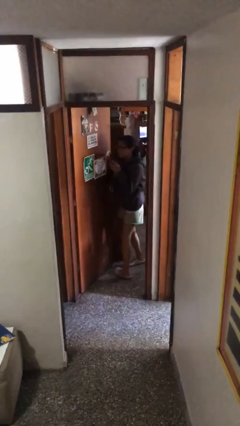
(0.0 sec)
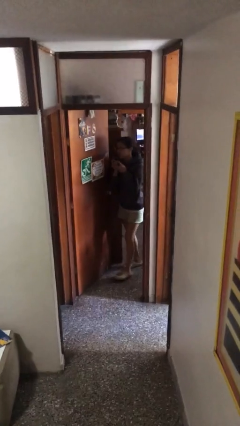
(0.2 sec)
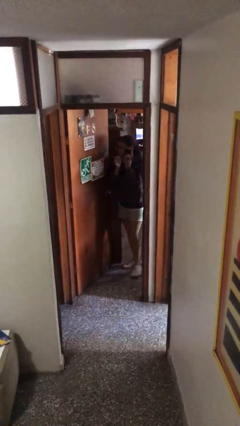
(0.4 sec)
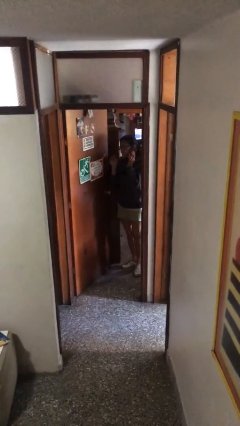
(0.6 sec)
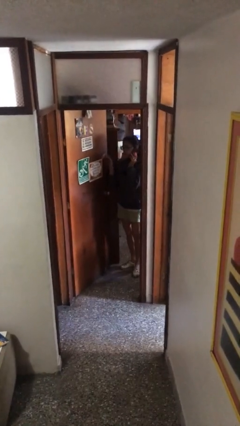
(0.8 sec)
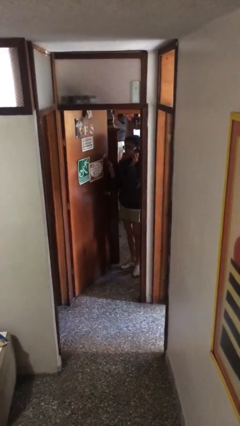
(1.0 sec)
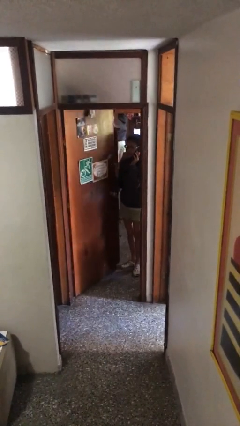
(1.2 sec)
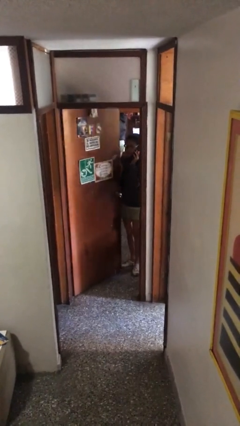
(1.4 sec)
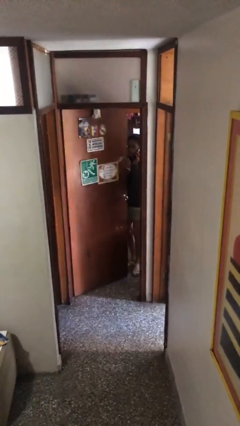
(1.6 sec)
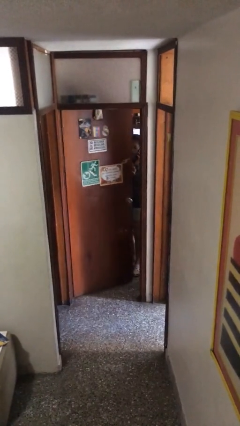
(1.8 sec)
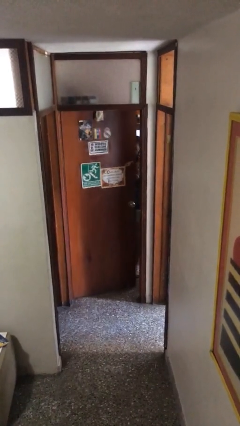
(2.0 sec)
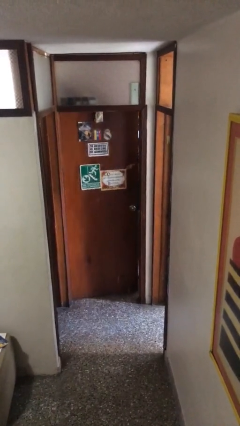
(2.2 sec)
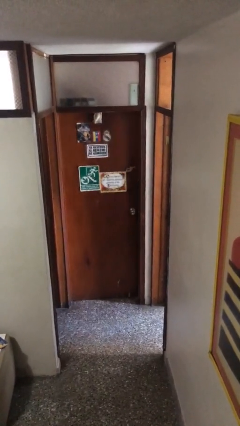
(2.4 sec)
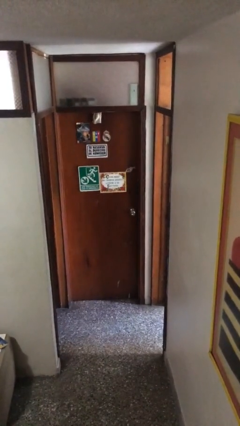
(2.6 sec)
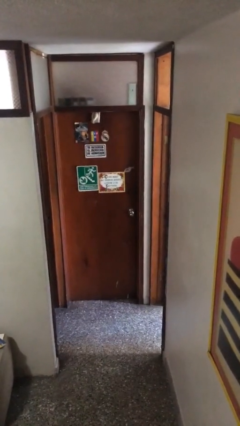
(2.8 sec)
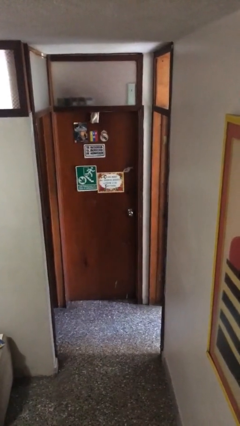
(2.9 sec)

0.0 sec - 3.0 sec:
person closes facility door

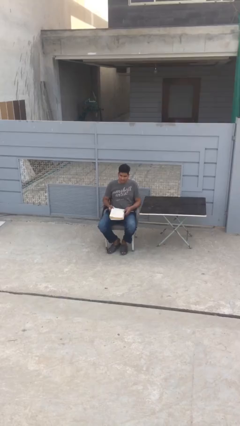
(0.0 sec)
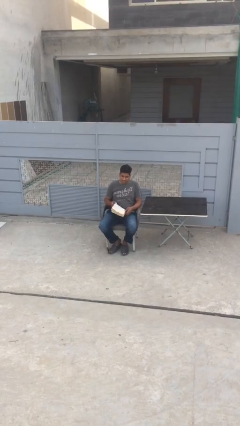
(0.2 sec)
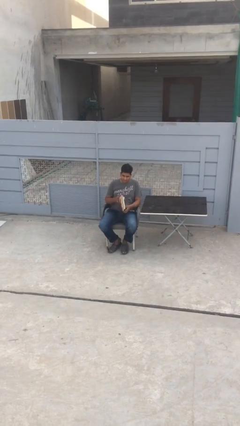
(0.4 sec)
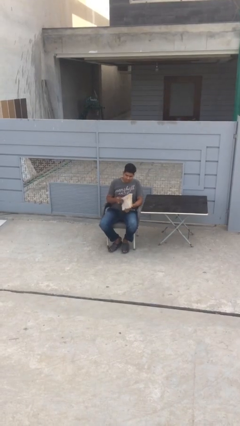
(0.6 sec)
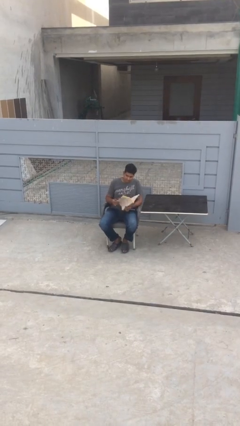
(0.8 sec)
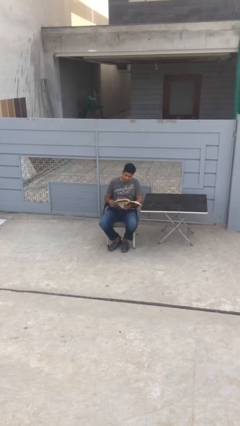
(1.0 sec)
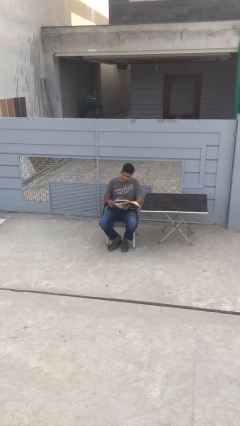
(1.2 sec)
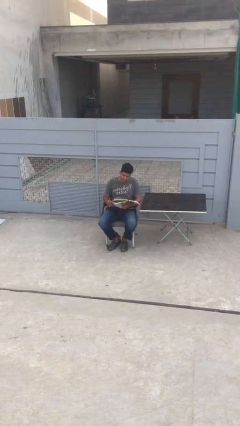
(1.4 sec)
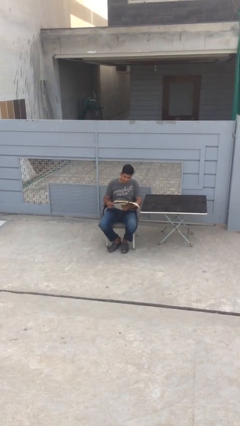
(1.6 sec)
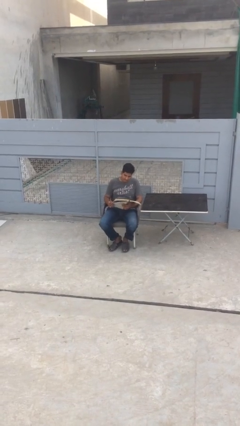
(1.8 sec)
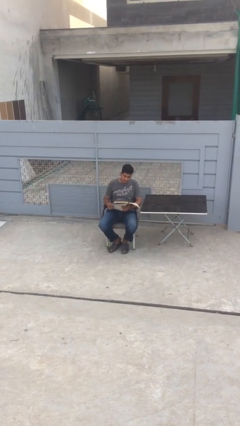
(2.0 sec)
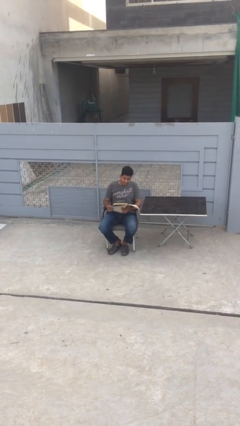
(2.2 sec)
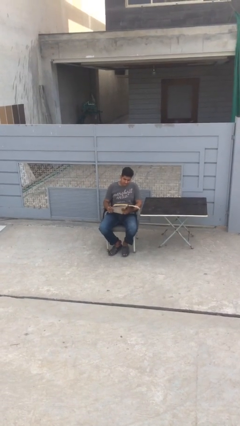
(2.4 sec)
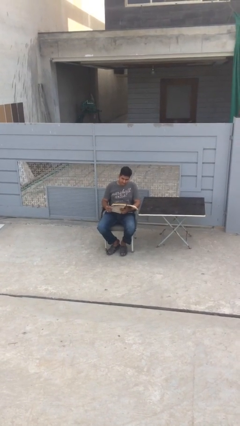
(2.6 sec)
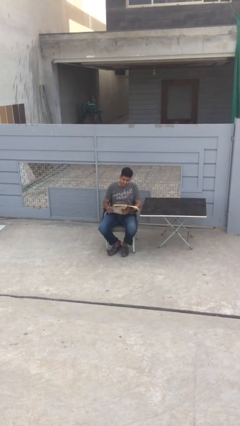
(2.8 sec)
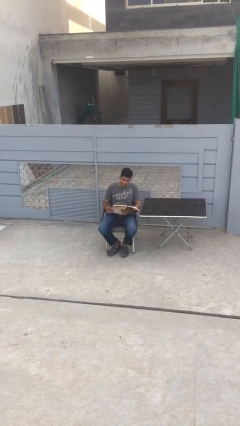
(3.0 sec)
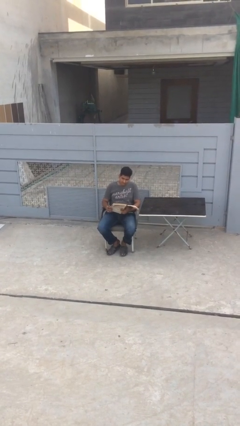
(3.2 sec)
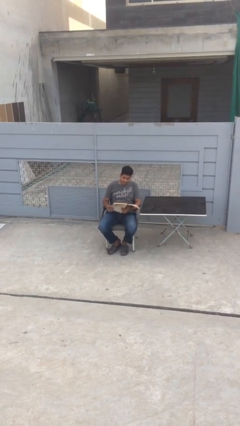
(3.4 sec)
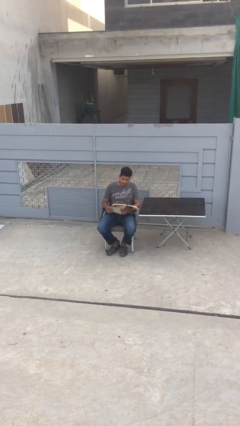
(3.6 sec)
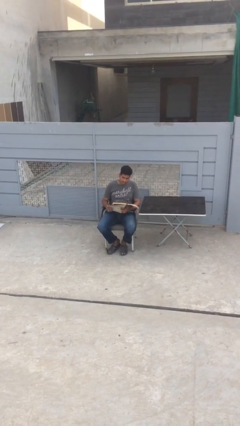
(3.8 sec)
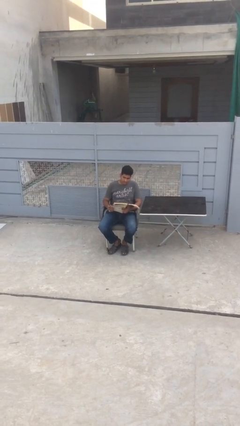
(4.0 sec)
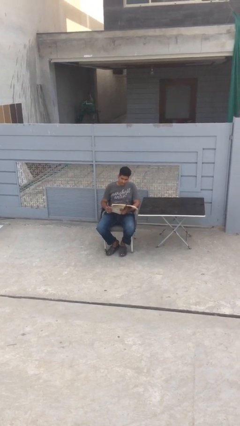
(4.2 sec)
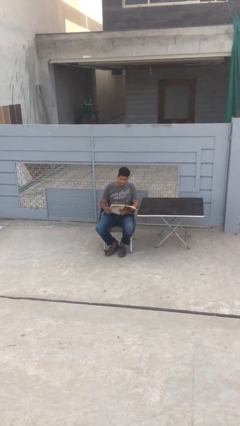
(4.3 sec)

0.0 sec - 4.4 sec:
person reads document

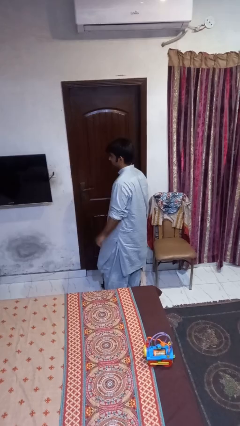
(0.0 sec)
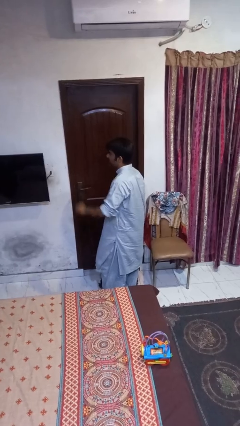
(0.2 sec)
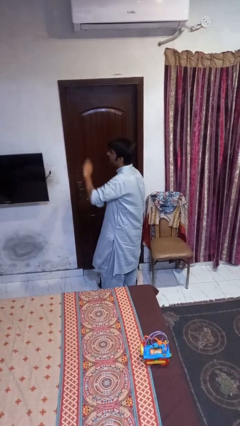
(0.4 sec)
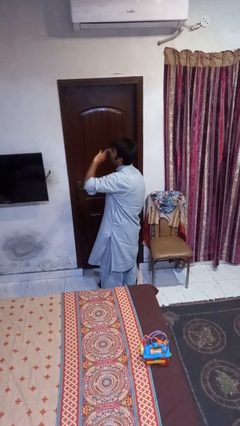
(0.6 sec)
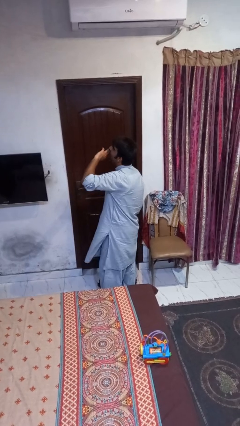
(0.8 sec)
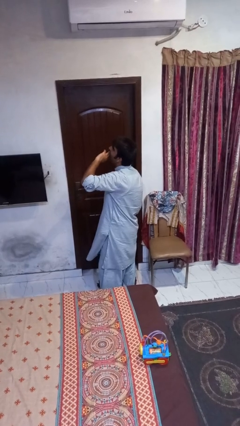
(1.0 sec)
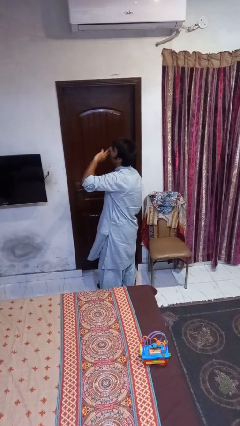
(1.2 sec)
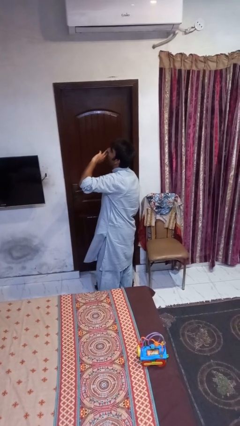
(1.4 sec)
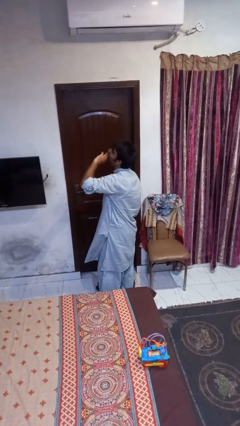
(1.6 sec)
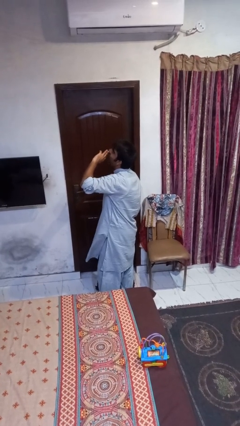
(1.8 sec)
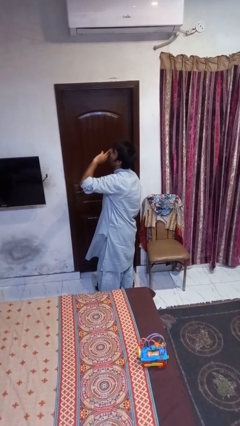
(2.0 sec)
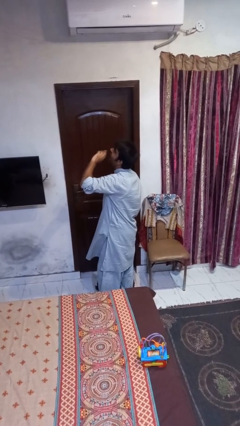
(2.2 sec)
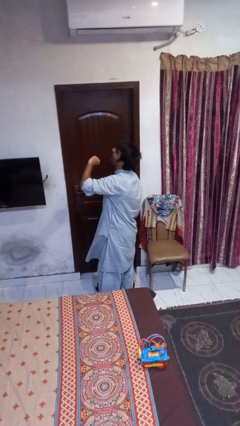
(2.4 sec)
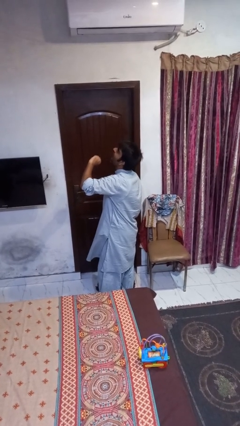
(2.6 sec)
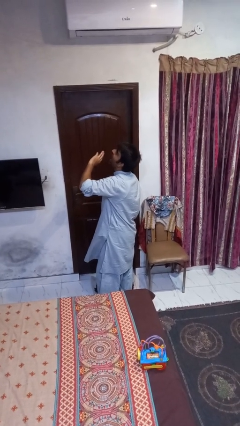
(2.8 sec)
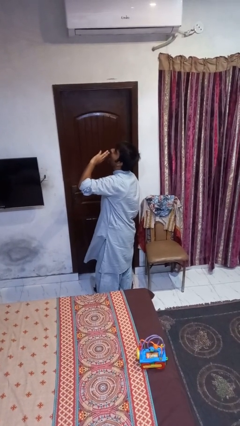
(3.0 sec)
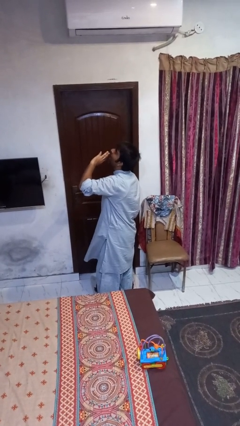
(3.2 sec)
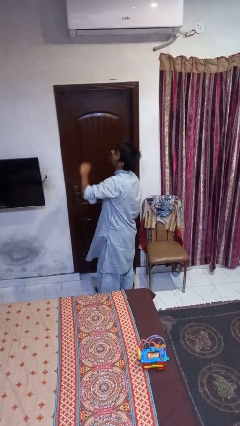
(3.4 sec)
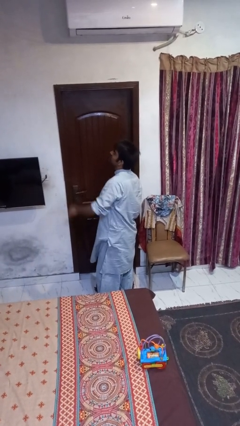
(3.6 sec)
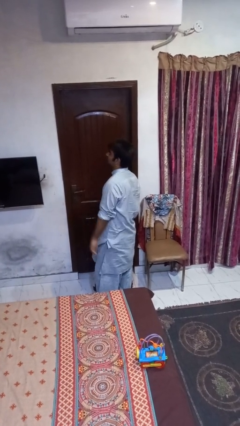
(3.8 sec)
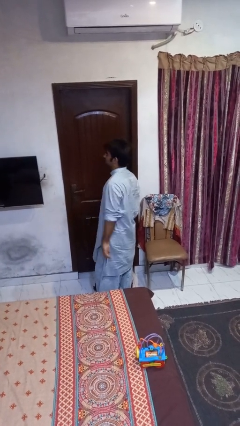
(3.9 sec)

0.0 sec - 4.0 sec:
person yawns

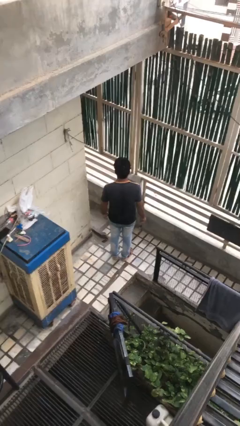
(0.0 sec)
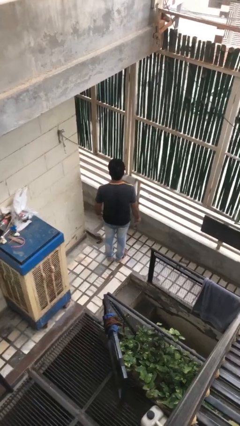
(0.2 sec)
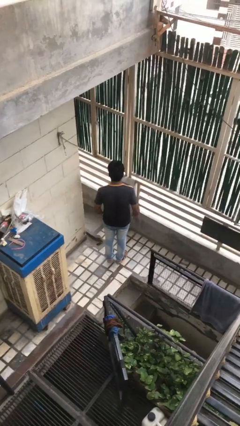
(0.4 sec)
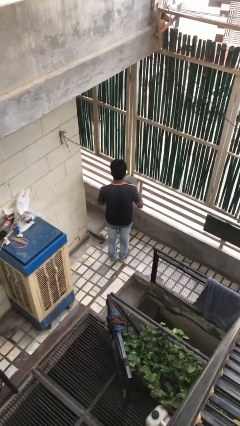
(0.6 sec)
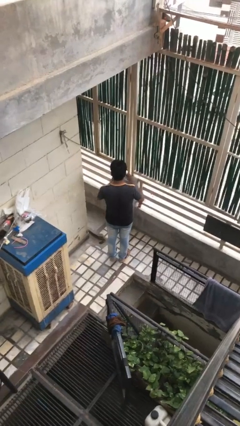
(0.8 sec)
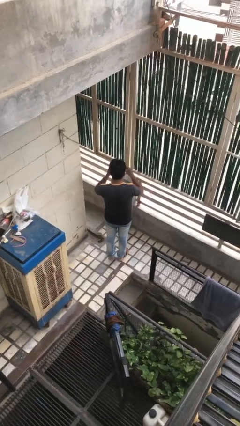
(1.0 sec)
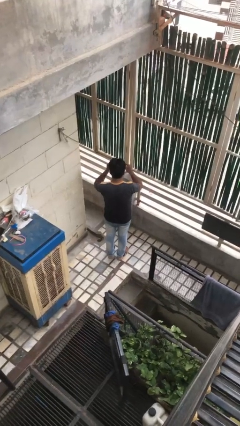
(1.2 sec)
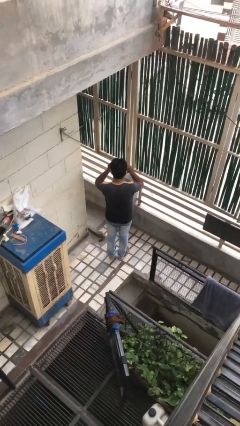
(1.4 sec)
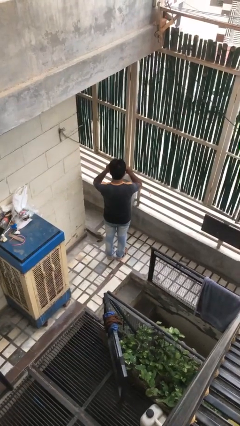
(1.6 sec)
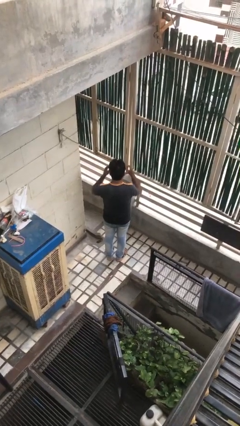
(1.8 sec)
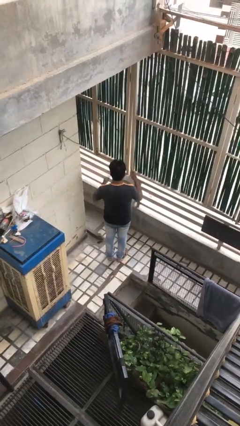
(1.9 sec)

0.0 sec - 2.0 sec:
person puts on glasses

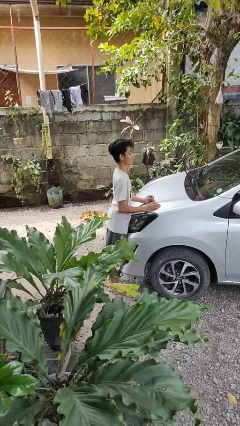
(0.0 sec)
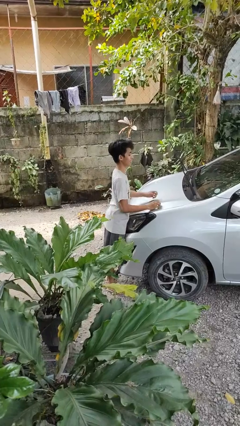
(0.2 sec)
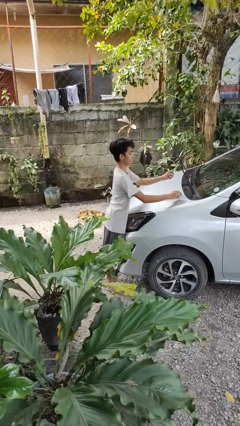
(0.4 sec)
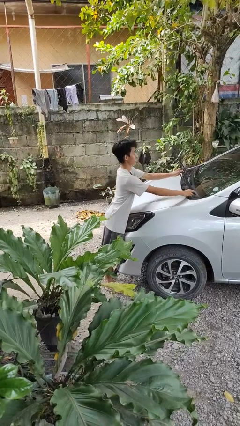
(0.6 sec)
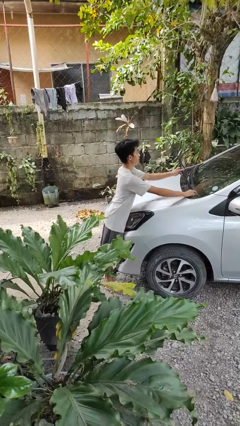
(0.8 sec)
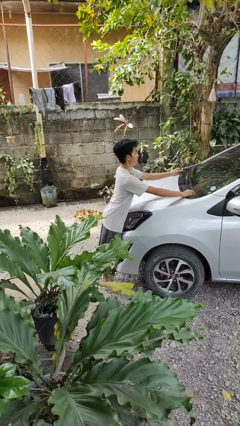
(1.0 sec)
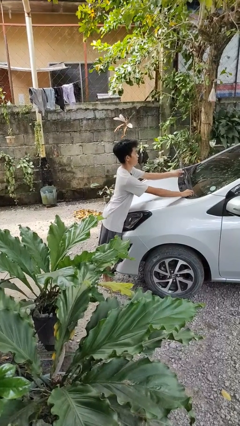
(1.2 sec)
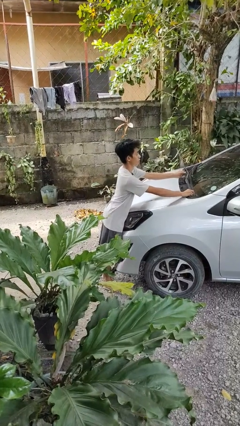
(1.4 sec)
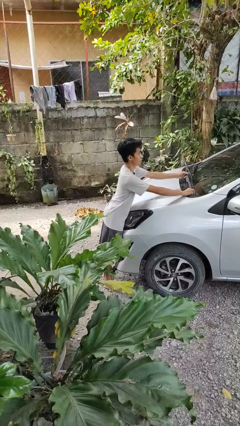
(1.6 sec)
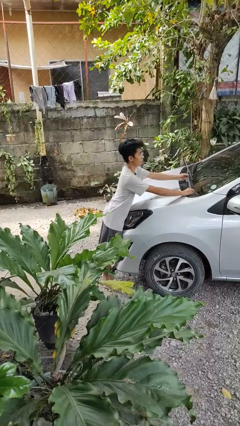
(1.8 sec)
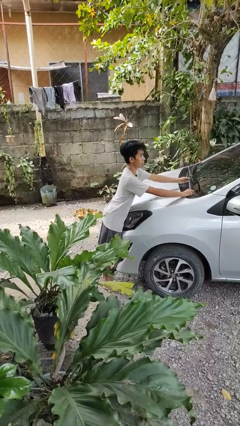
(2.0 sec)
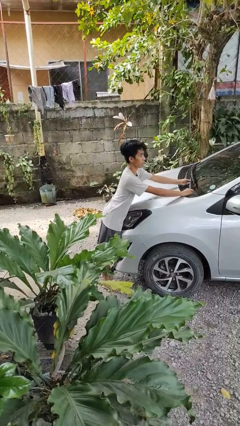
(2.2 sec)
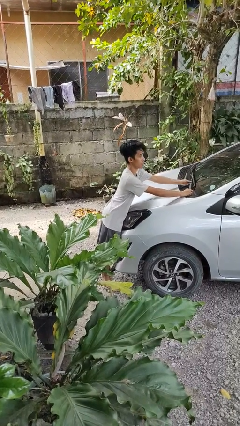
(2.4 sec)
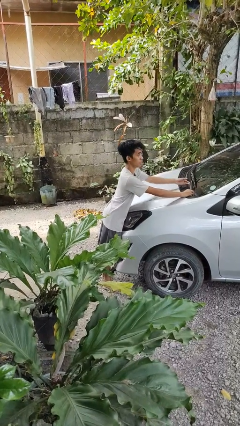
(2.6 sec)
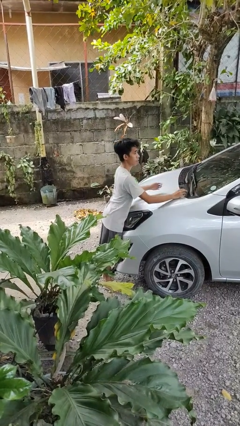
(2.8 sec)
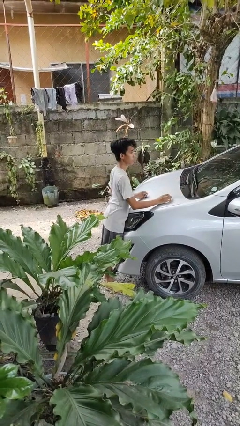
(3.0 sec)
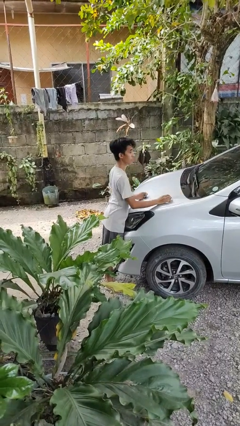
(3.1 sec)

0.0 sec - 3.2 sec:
person flips down car wipers

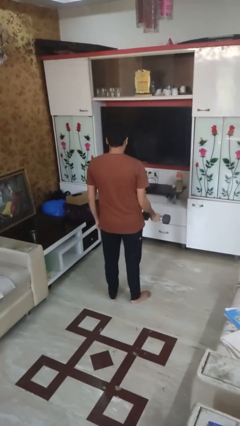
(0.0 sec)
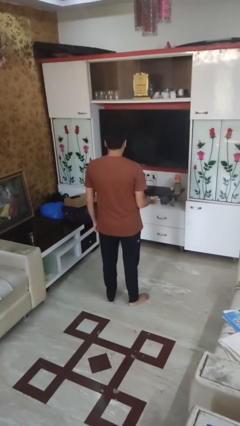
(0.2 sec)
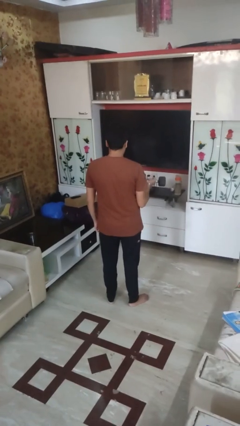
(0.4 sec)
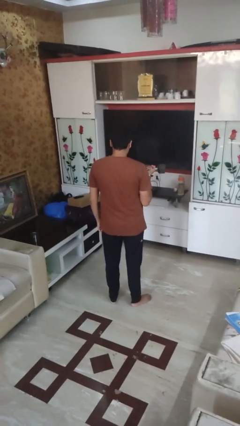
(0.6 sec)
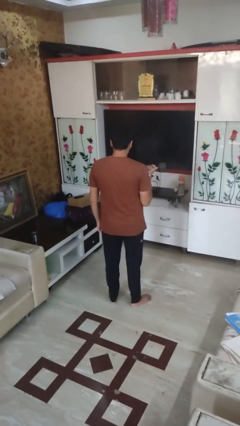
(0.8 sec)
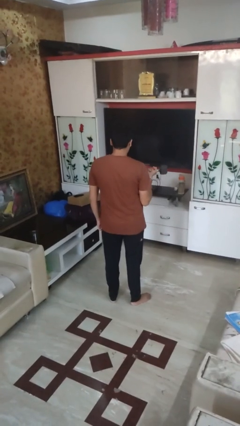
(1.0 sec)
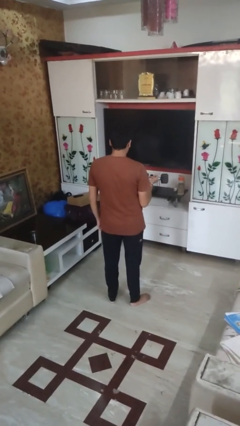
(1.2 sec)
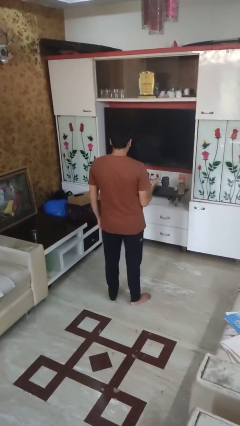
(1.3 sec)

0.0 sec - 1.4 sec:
person lifts dumbbells
